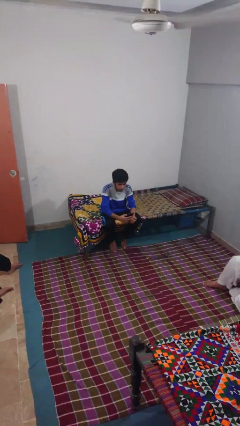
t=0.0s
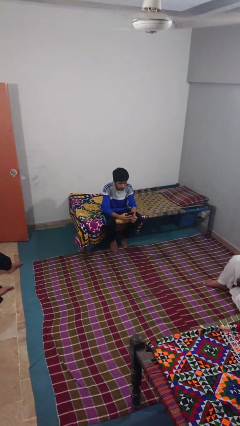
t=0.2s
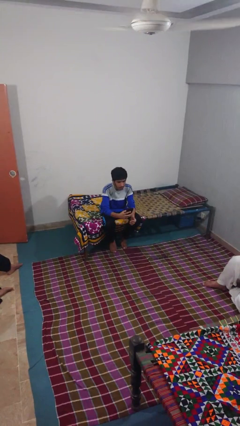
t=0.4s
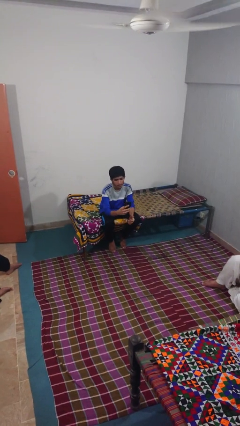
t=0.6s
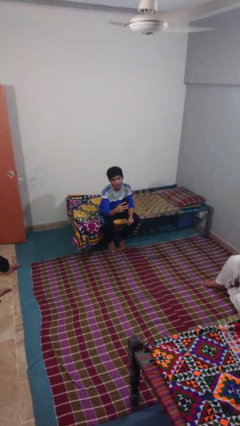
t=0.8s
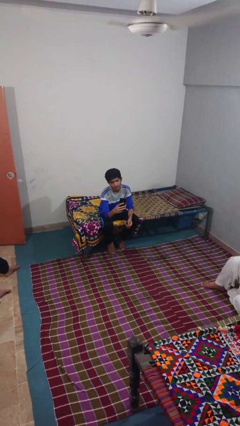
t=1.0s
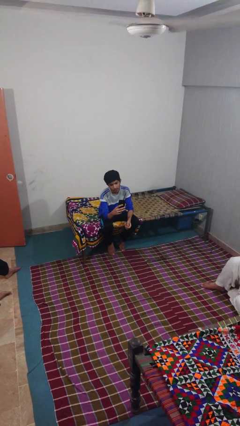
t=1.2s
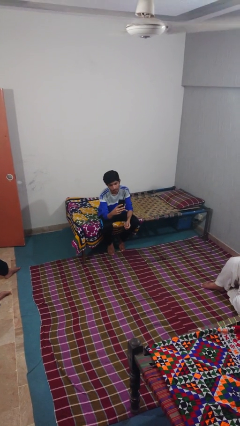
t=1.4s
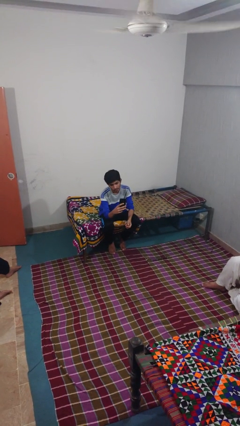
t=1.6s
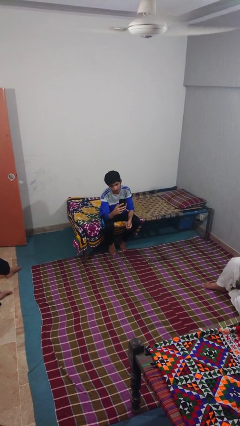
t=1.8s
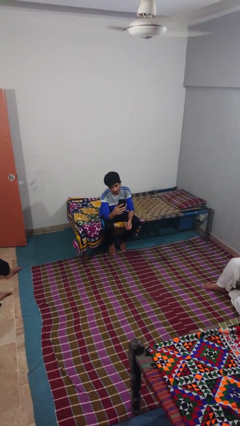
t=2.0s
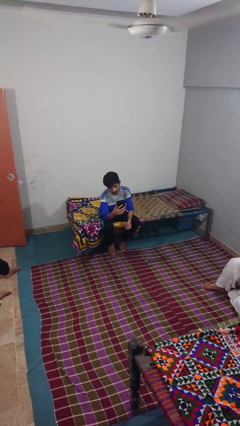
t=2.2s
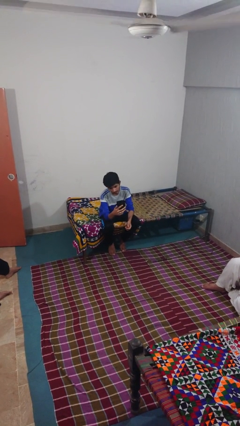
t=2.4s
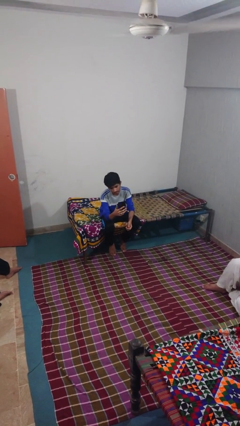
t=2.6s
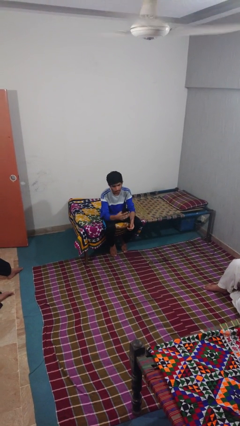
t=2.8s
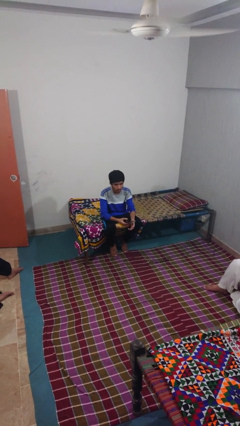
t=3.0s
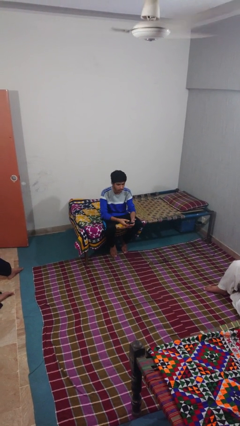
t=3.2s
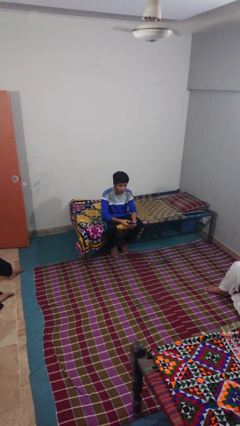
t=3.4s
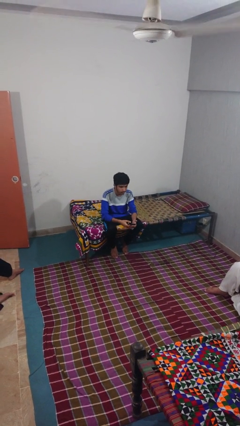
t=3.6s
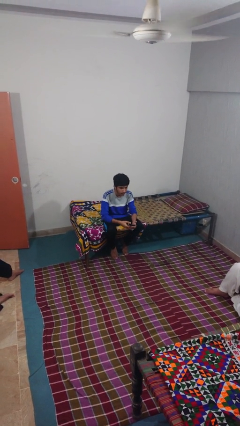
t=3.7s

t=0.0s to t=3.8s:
person takes selfie

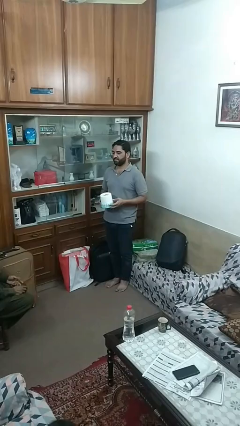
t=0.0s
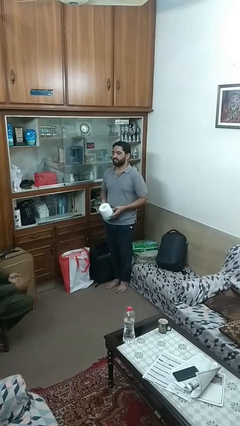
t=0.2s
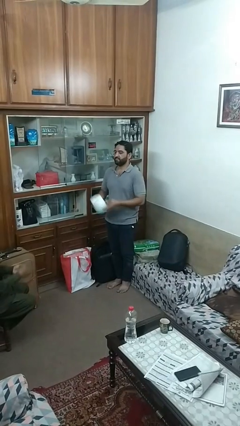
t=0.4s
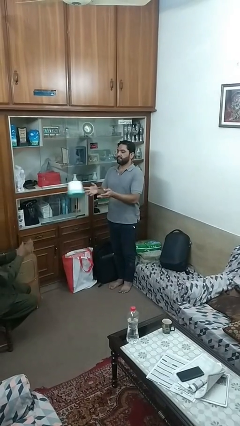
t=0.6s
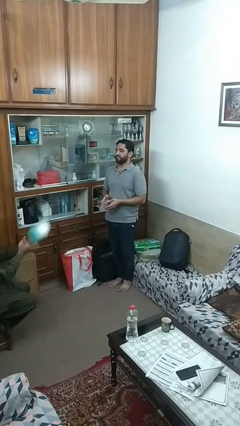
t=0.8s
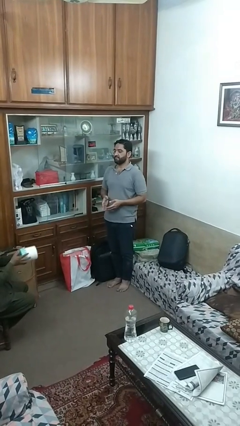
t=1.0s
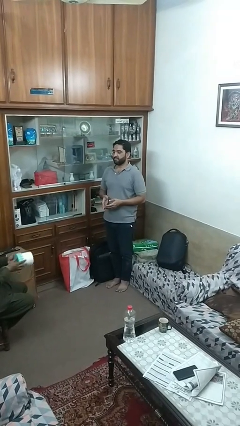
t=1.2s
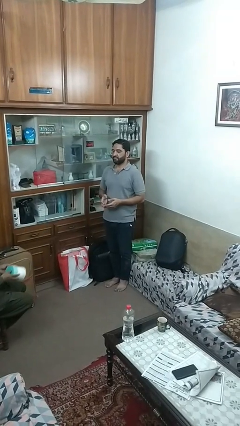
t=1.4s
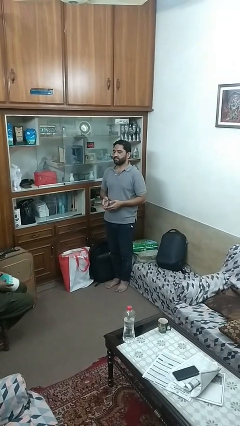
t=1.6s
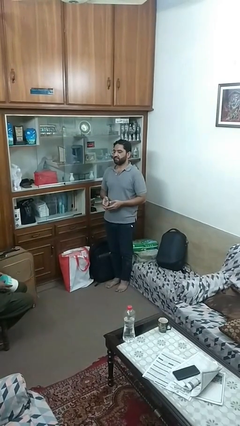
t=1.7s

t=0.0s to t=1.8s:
person throws object to person

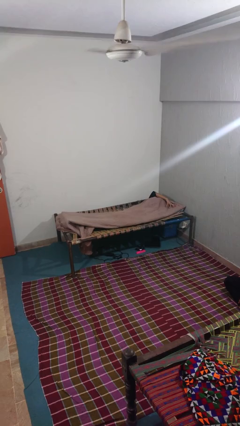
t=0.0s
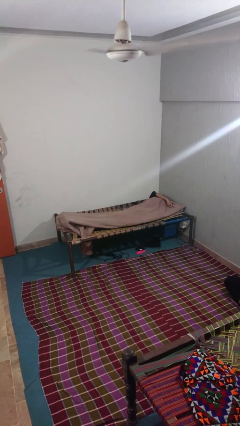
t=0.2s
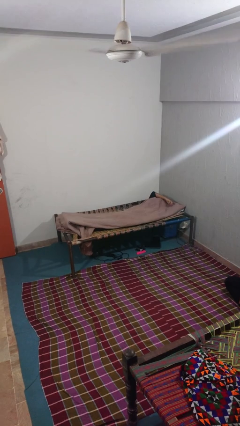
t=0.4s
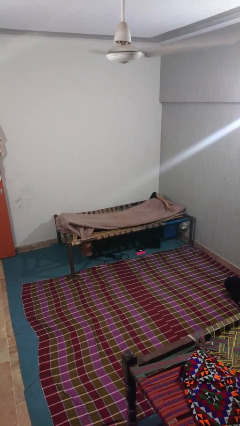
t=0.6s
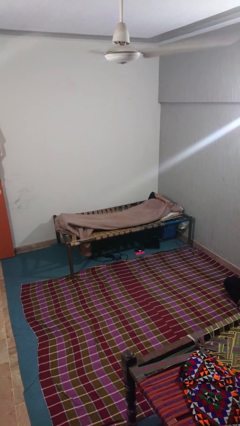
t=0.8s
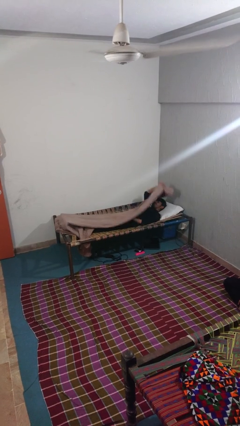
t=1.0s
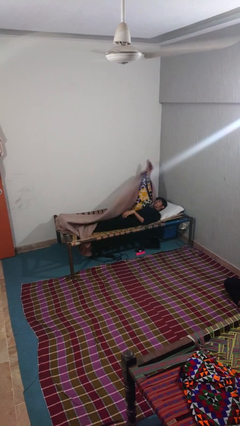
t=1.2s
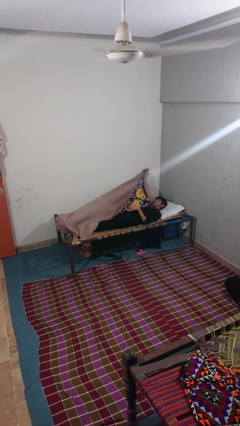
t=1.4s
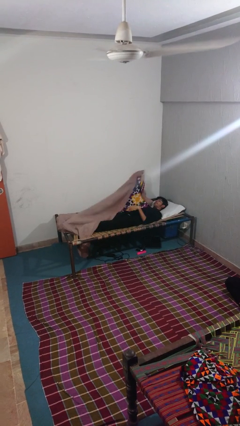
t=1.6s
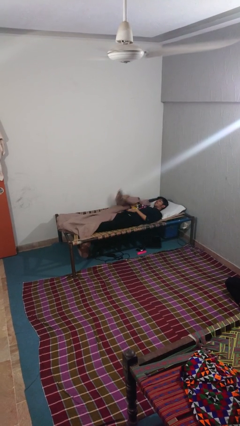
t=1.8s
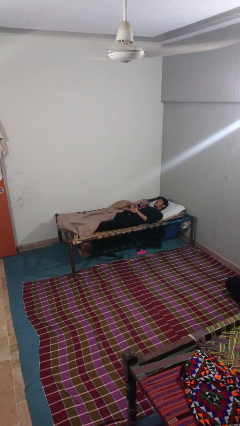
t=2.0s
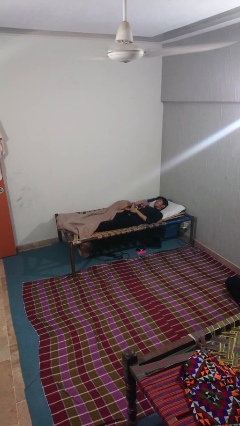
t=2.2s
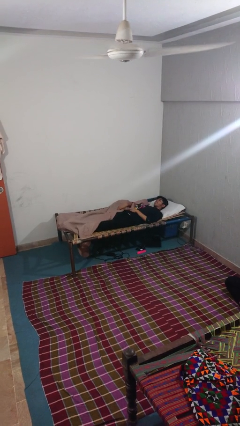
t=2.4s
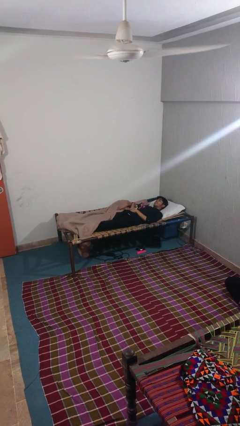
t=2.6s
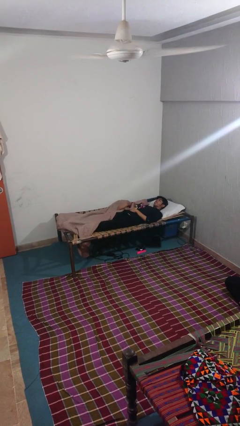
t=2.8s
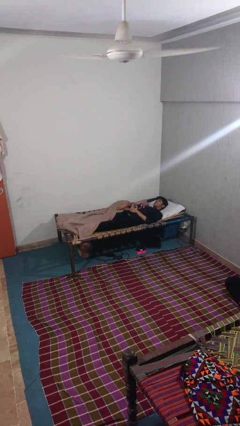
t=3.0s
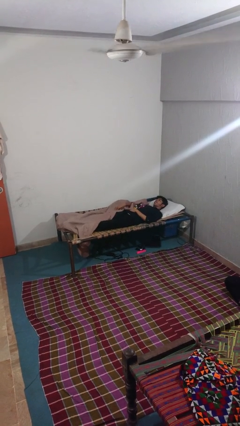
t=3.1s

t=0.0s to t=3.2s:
person uncovers with blanket

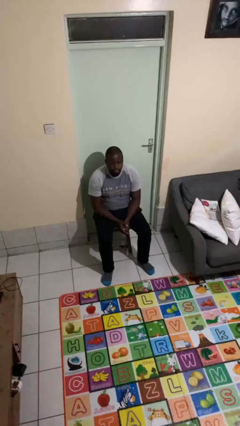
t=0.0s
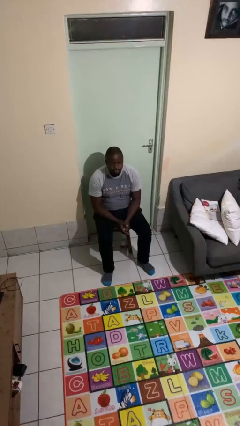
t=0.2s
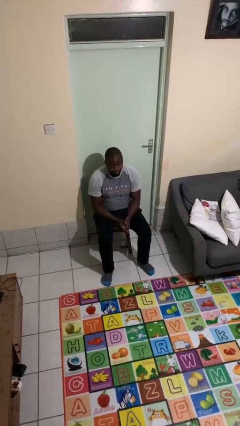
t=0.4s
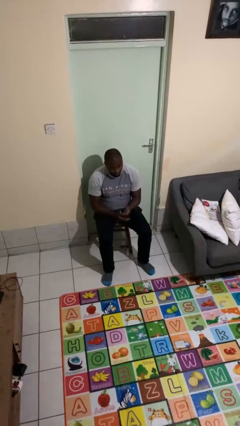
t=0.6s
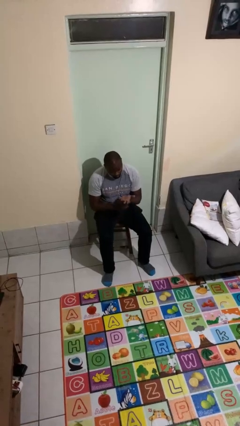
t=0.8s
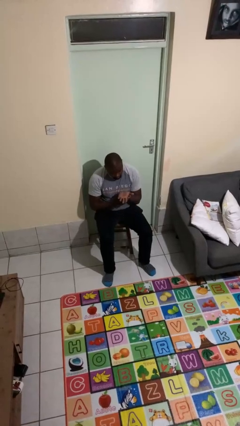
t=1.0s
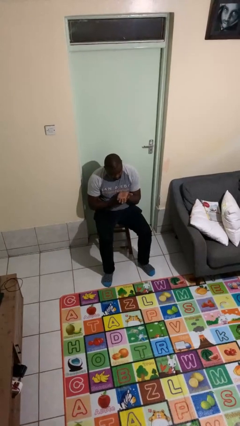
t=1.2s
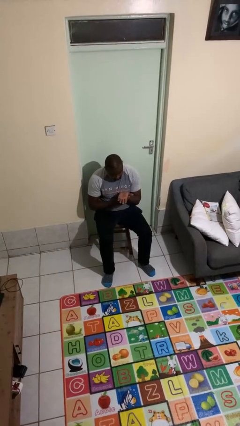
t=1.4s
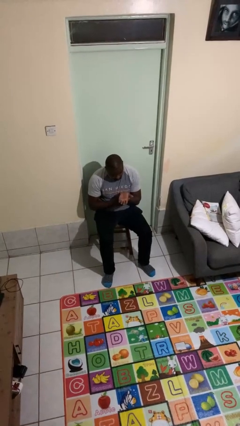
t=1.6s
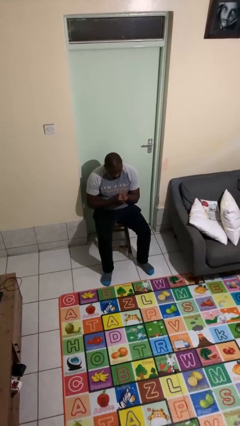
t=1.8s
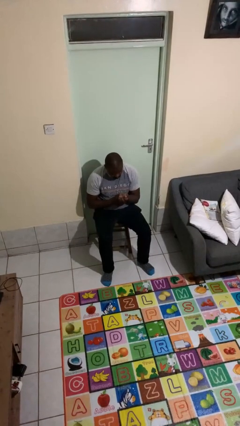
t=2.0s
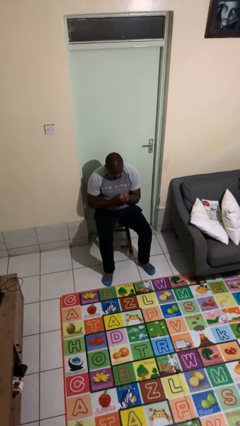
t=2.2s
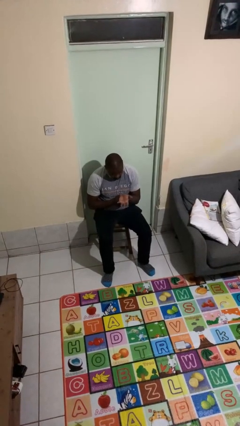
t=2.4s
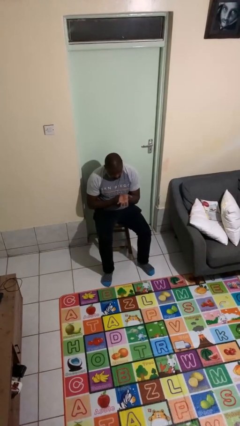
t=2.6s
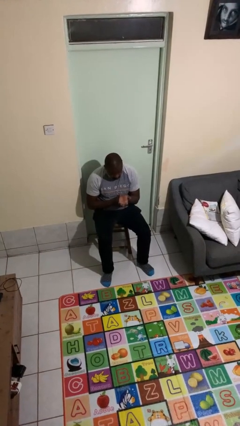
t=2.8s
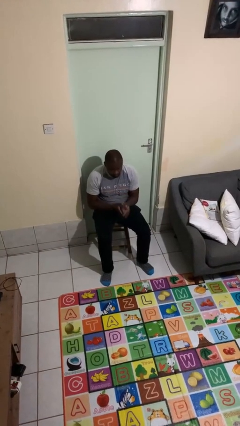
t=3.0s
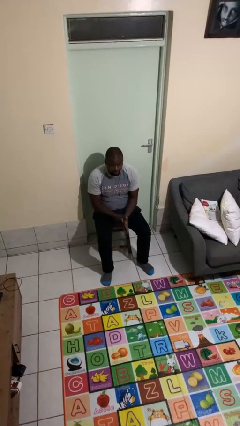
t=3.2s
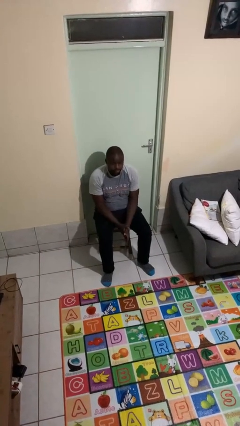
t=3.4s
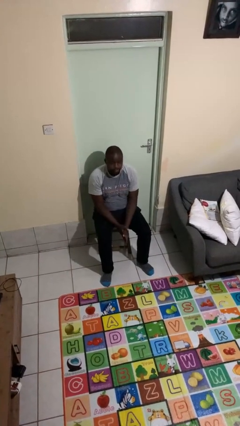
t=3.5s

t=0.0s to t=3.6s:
person looks at hands in lap

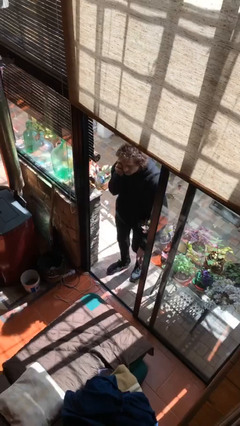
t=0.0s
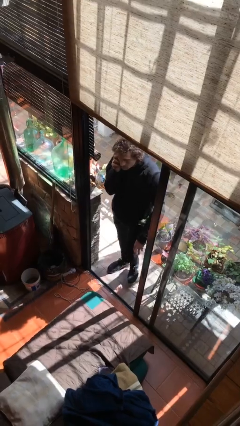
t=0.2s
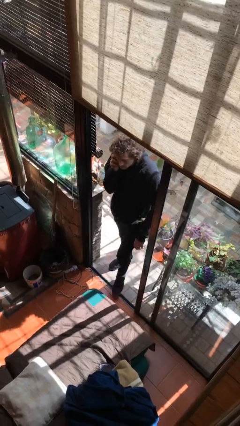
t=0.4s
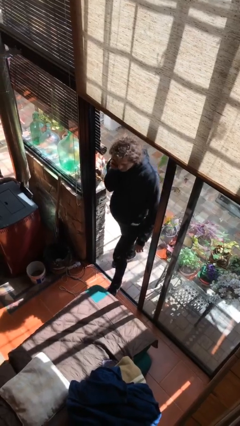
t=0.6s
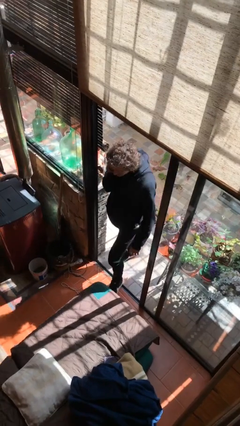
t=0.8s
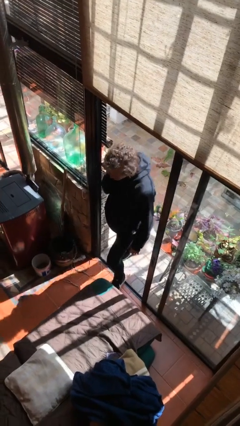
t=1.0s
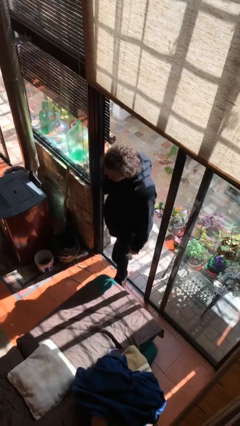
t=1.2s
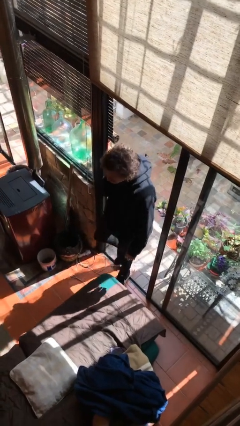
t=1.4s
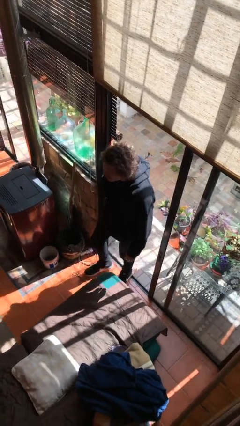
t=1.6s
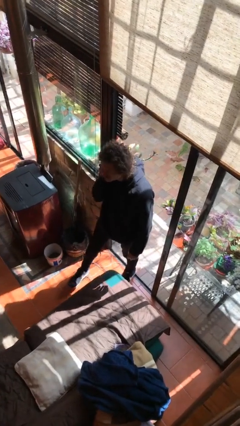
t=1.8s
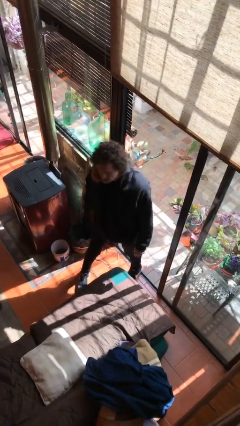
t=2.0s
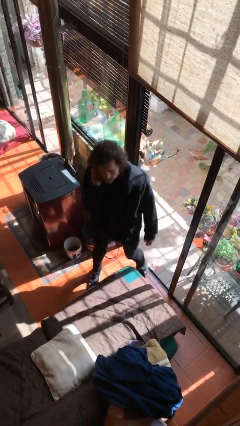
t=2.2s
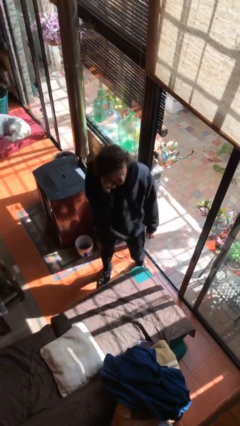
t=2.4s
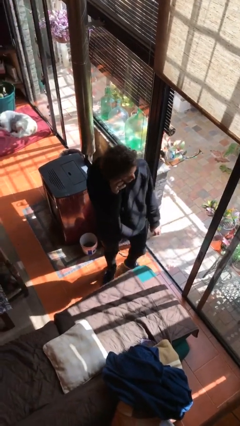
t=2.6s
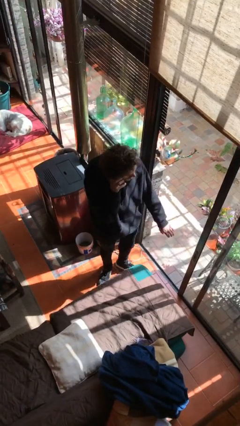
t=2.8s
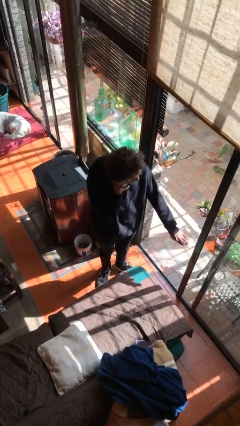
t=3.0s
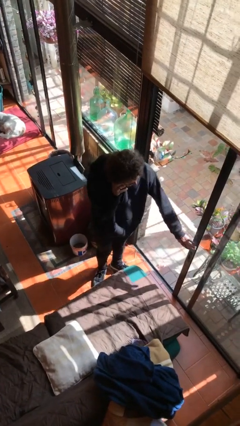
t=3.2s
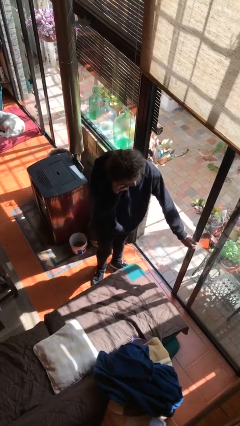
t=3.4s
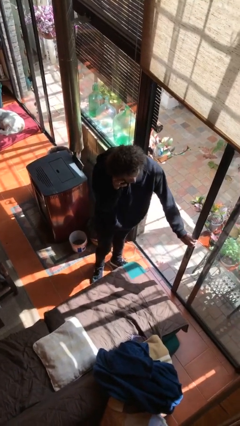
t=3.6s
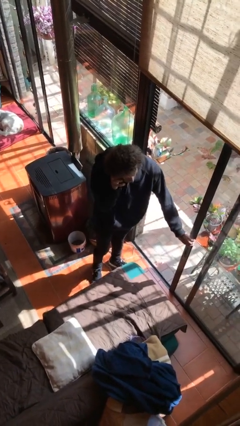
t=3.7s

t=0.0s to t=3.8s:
person enters scene through structure

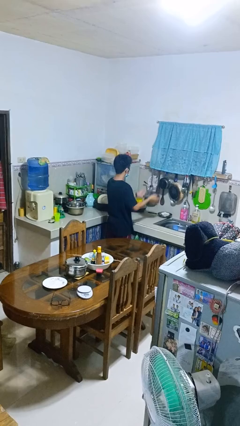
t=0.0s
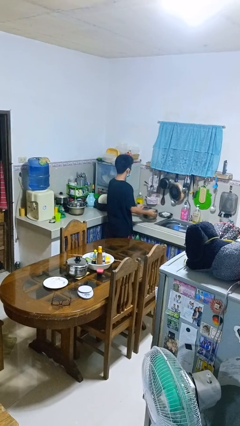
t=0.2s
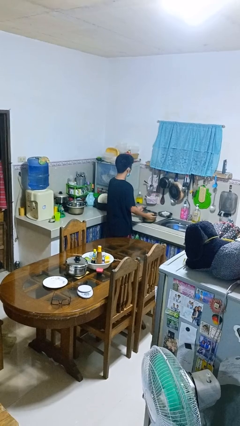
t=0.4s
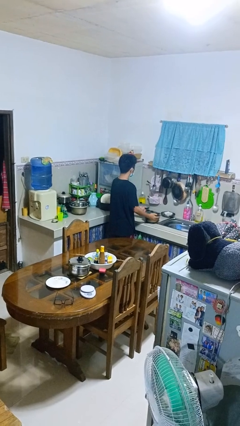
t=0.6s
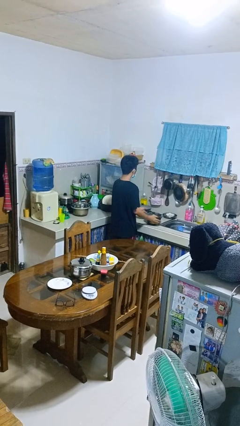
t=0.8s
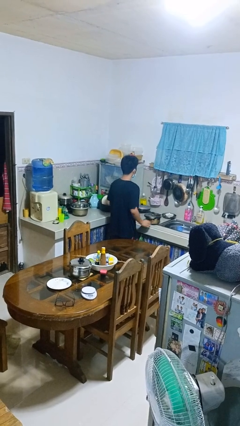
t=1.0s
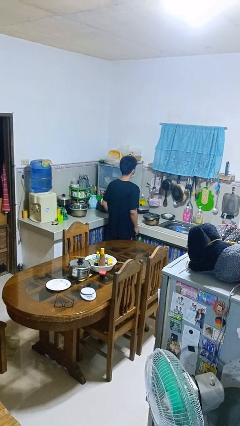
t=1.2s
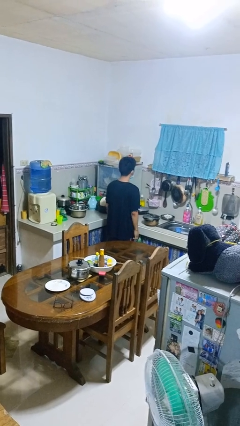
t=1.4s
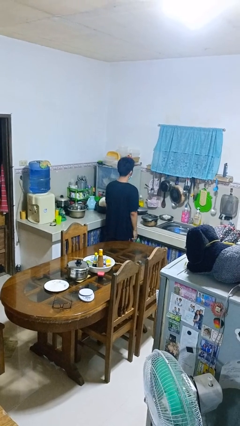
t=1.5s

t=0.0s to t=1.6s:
person puts down object on countertop
